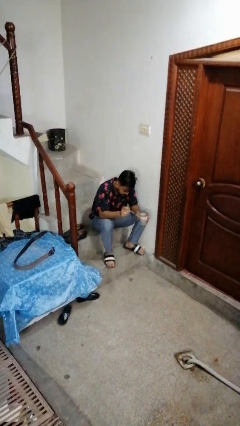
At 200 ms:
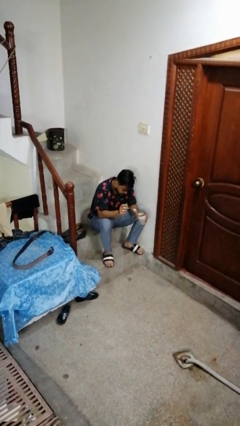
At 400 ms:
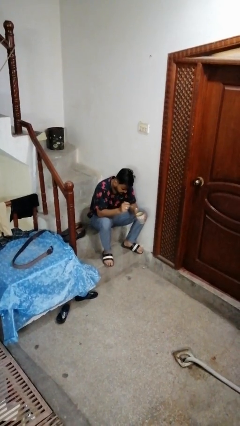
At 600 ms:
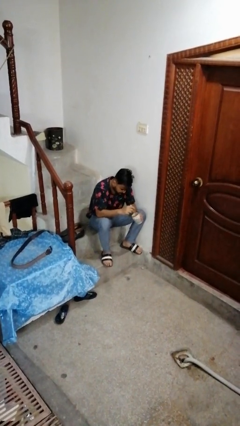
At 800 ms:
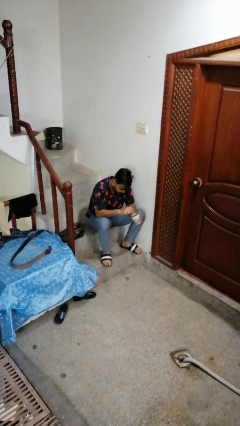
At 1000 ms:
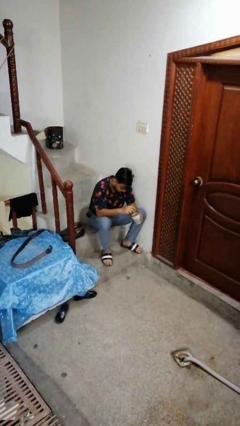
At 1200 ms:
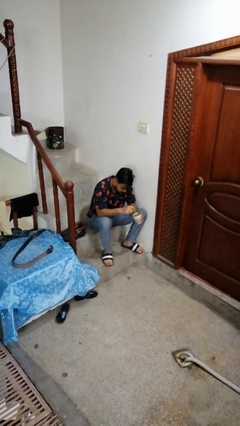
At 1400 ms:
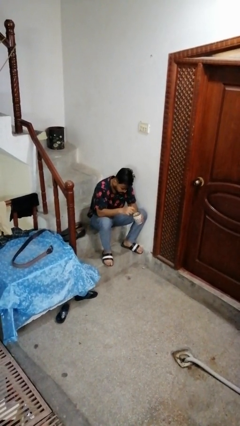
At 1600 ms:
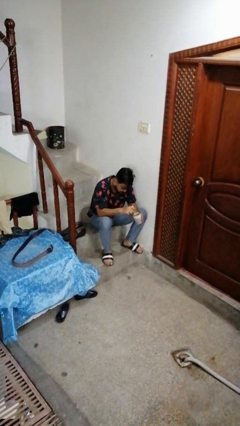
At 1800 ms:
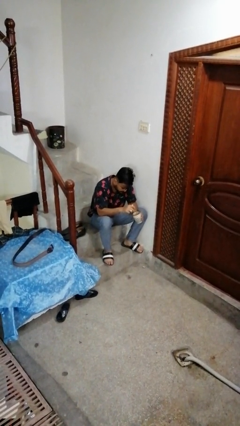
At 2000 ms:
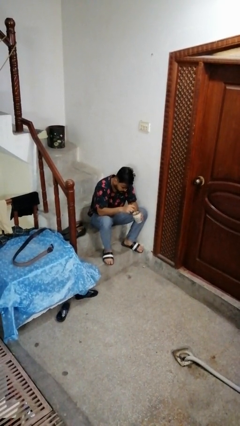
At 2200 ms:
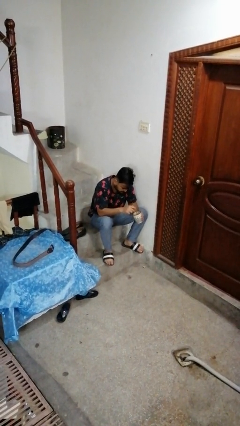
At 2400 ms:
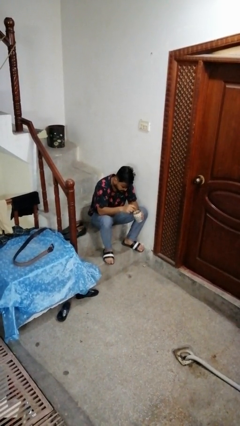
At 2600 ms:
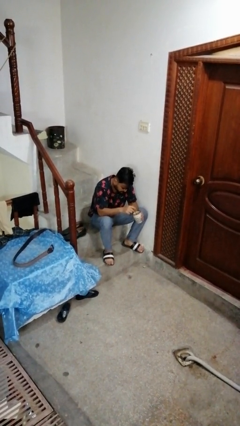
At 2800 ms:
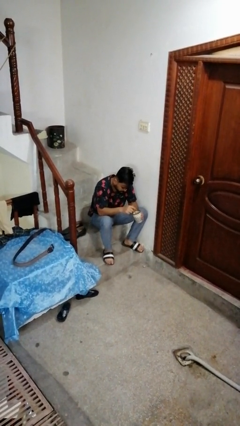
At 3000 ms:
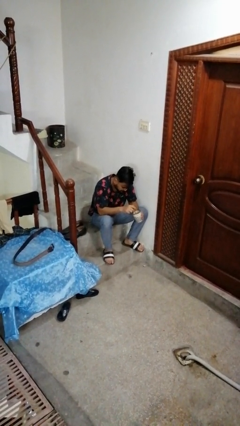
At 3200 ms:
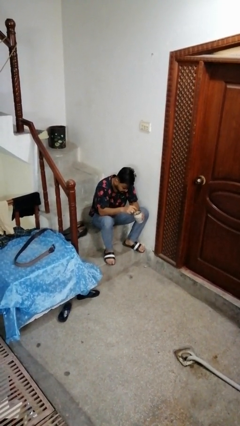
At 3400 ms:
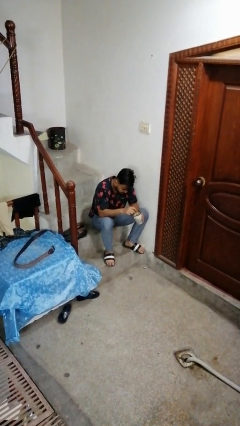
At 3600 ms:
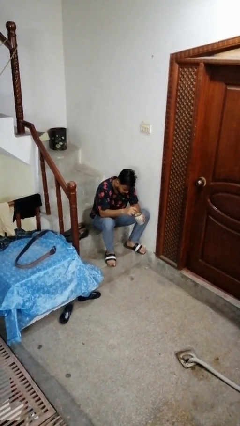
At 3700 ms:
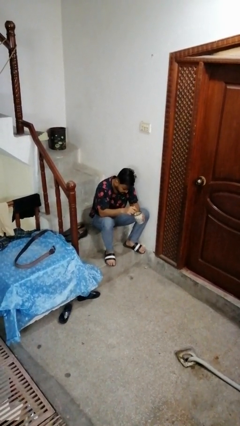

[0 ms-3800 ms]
person stirs mug

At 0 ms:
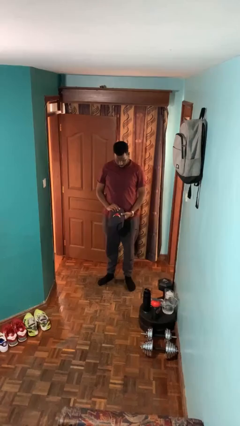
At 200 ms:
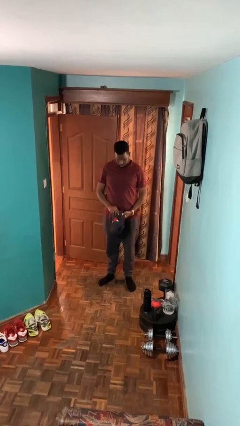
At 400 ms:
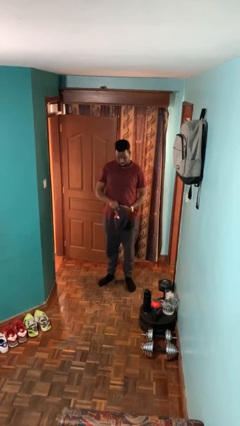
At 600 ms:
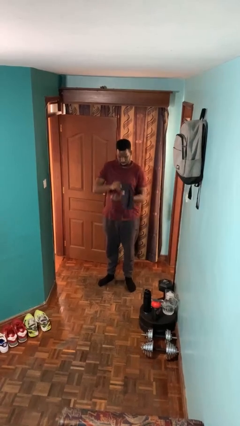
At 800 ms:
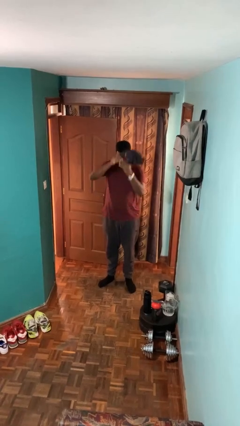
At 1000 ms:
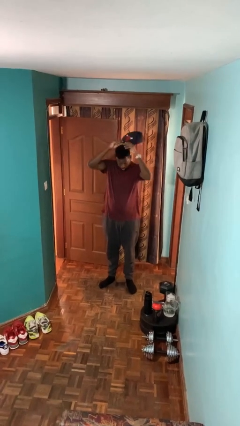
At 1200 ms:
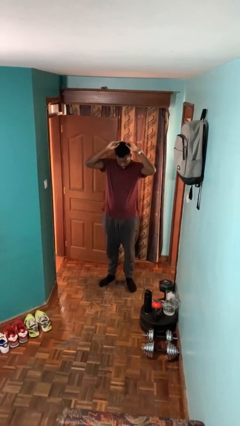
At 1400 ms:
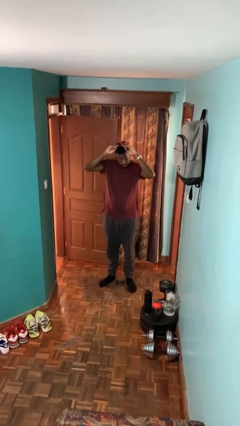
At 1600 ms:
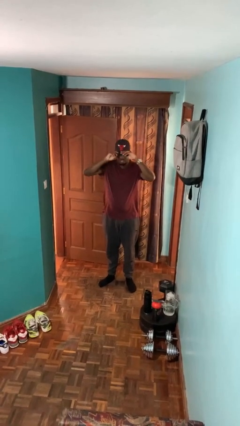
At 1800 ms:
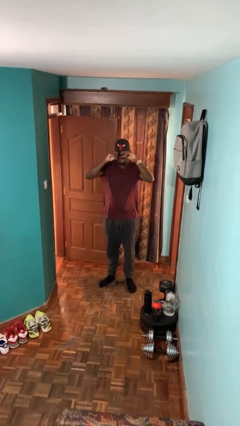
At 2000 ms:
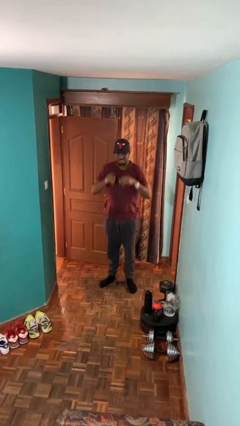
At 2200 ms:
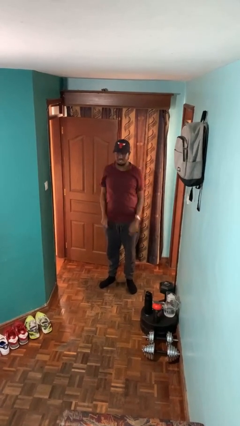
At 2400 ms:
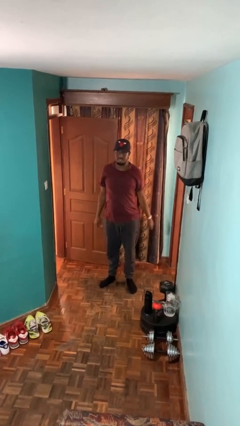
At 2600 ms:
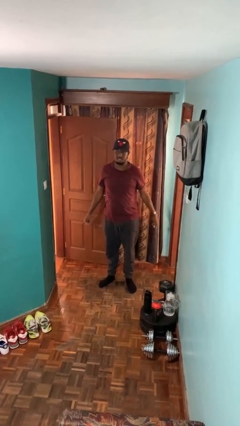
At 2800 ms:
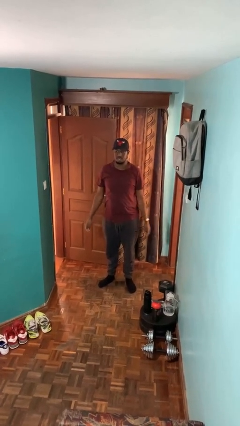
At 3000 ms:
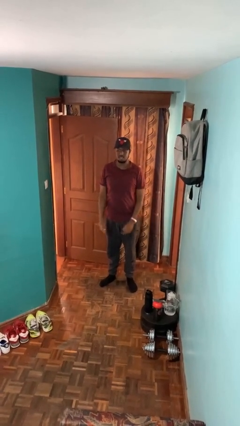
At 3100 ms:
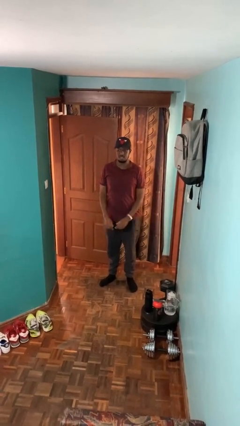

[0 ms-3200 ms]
person puts on hat

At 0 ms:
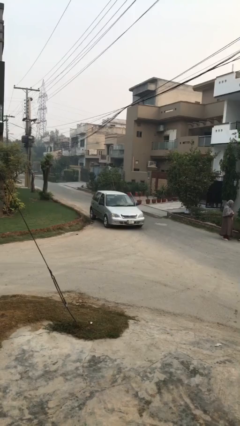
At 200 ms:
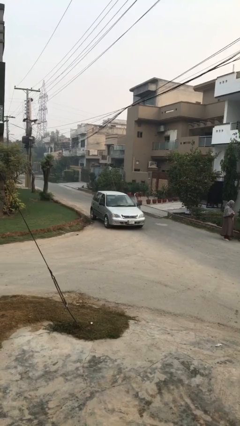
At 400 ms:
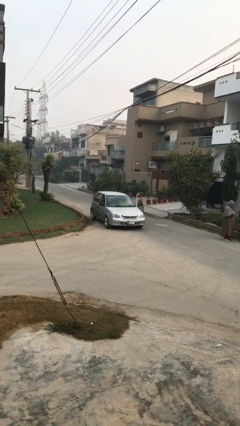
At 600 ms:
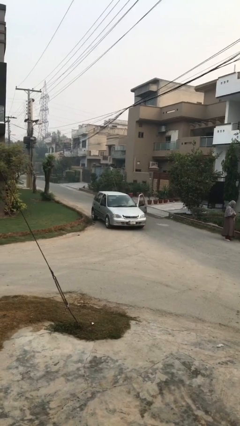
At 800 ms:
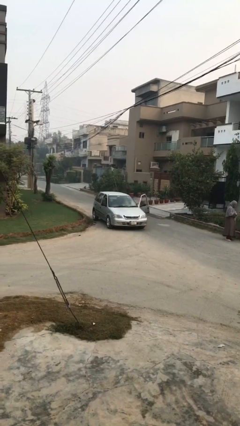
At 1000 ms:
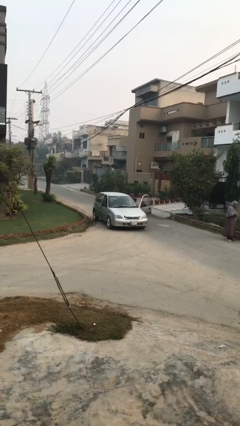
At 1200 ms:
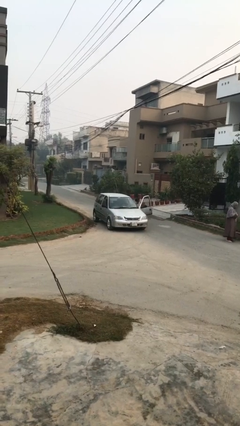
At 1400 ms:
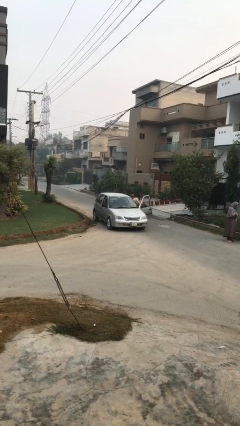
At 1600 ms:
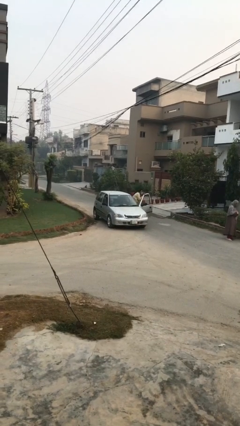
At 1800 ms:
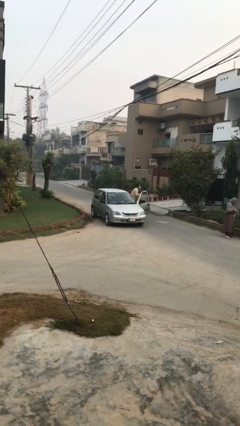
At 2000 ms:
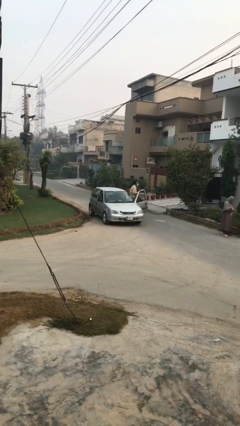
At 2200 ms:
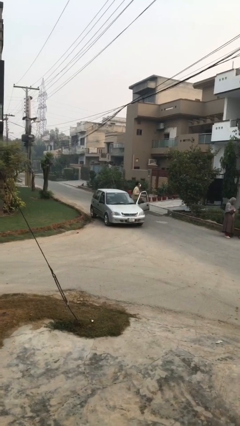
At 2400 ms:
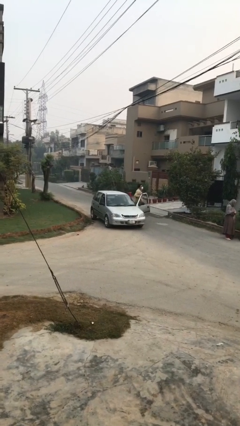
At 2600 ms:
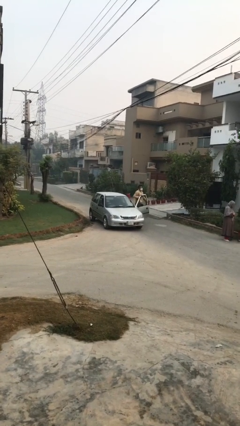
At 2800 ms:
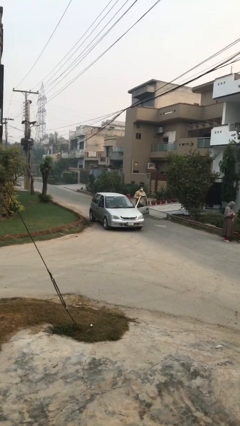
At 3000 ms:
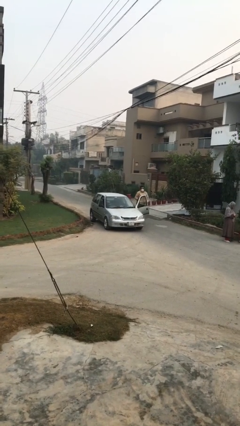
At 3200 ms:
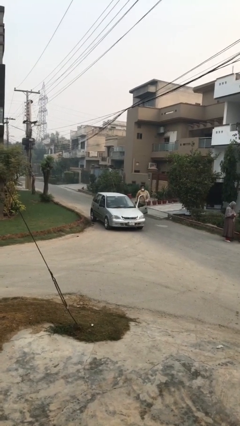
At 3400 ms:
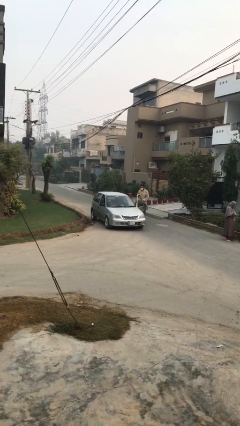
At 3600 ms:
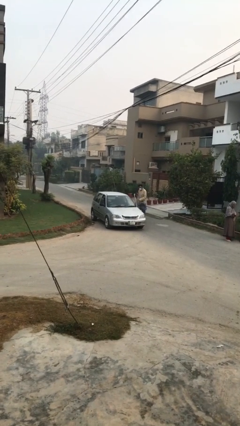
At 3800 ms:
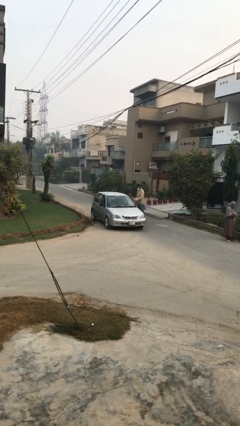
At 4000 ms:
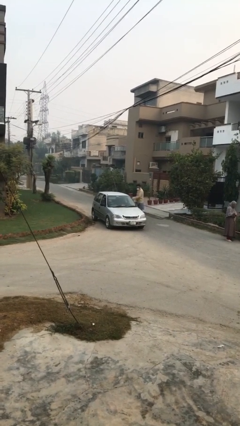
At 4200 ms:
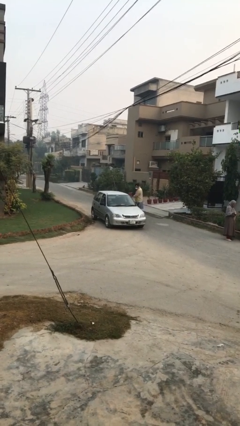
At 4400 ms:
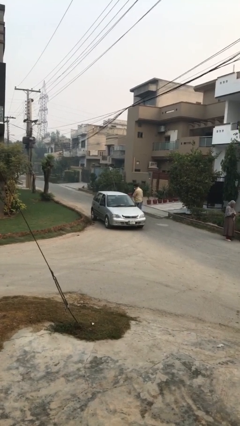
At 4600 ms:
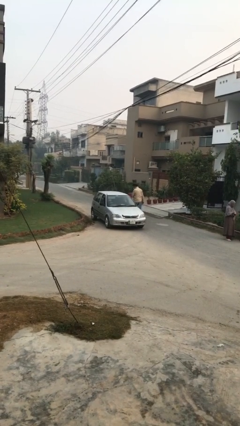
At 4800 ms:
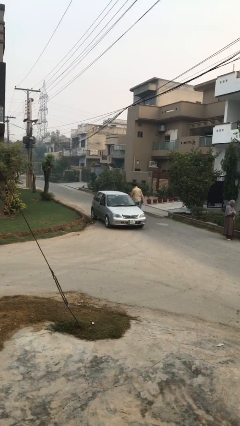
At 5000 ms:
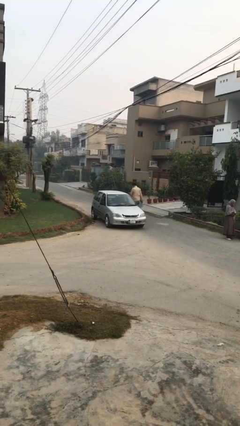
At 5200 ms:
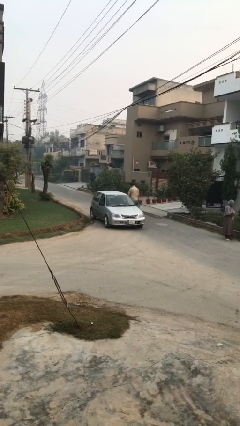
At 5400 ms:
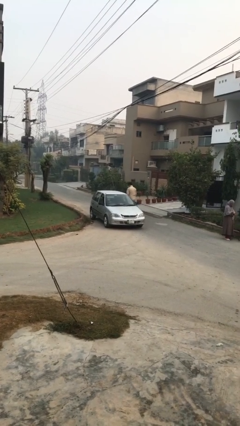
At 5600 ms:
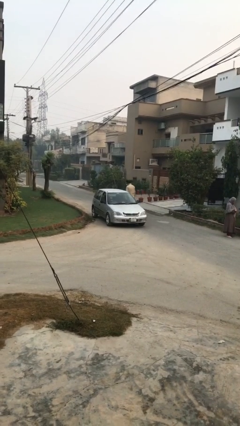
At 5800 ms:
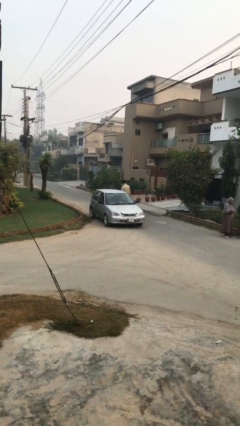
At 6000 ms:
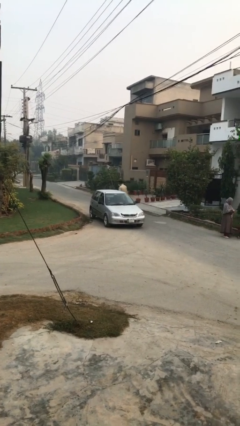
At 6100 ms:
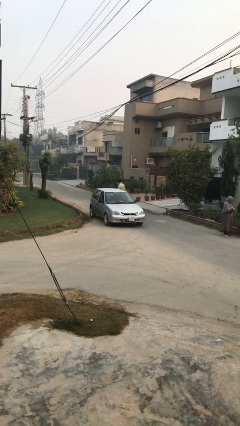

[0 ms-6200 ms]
car drops off person

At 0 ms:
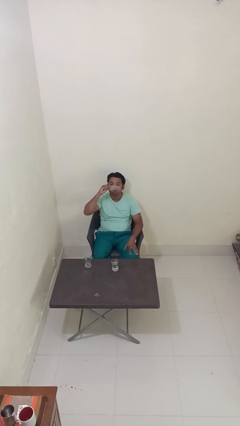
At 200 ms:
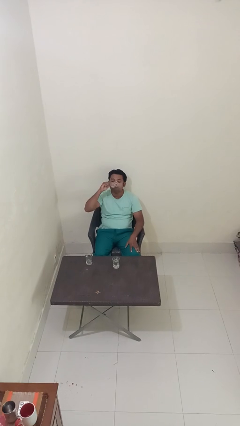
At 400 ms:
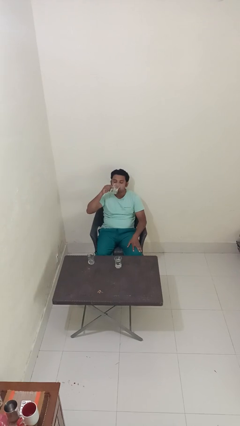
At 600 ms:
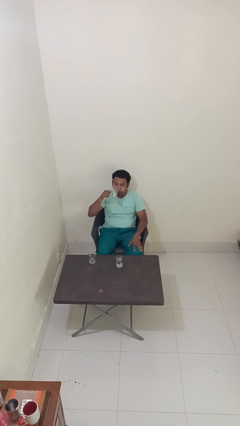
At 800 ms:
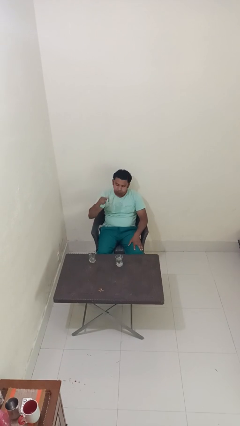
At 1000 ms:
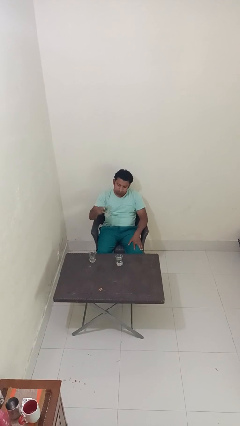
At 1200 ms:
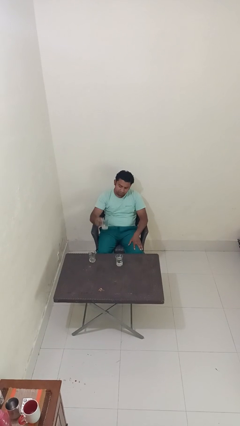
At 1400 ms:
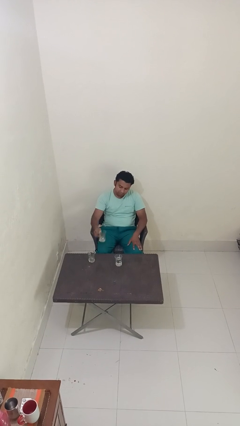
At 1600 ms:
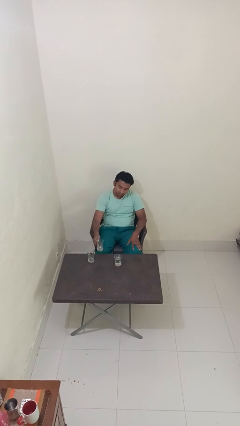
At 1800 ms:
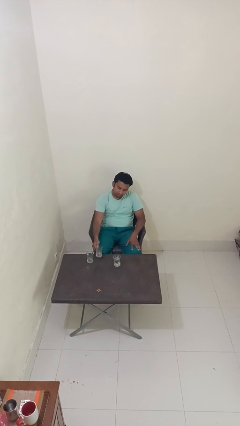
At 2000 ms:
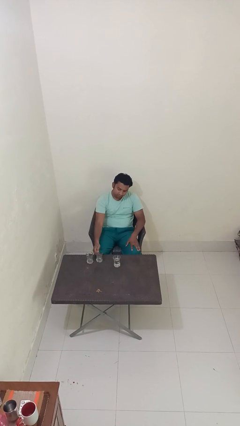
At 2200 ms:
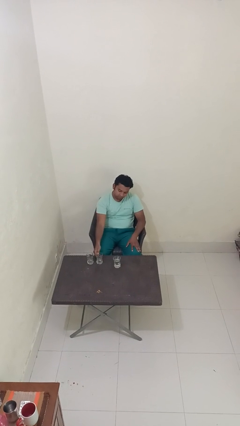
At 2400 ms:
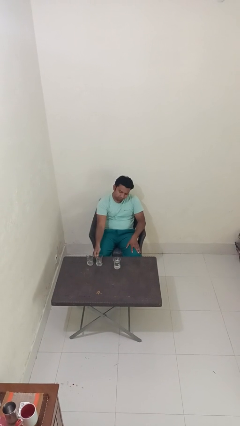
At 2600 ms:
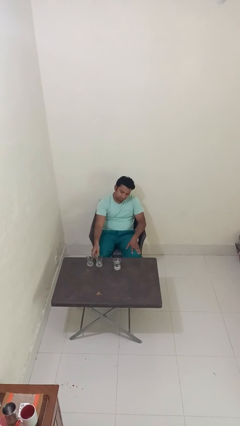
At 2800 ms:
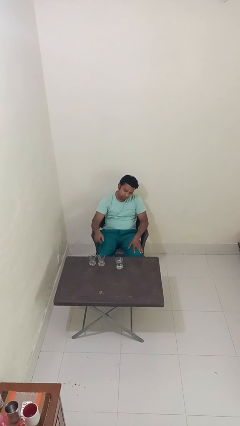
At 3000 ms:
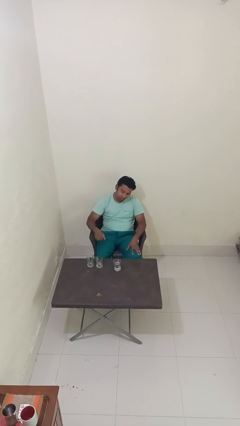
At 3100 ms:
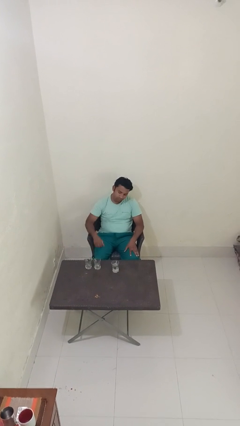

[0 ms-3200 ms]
person puts down object on table

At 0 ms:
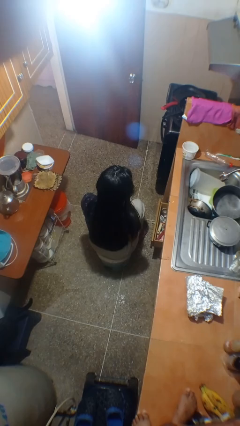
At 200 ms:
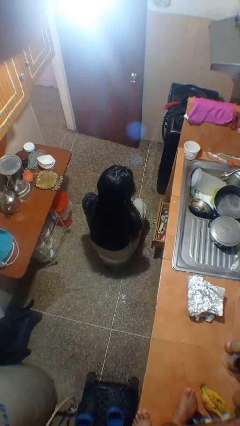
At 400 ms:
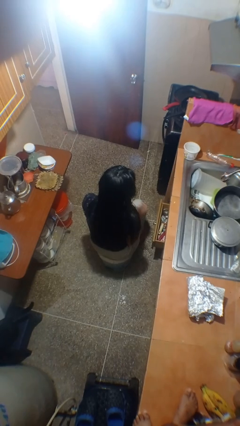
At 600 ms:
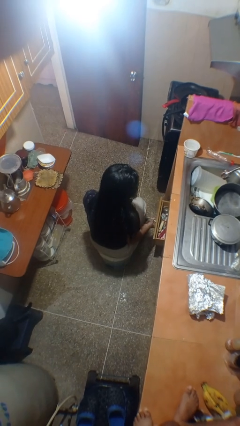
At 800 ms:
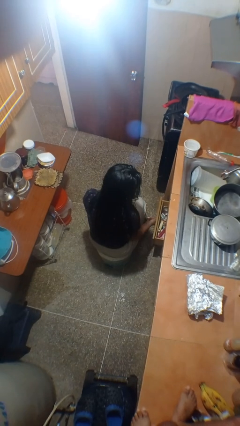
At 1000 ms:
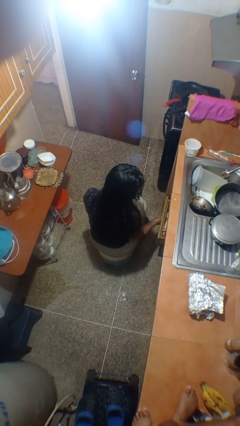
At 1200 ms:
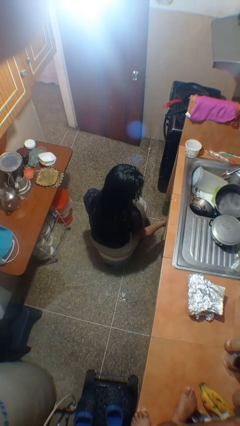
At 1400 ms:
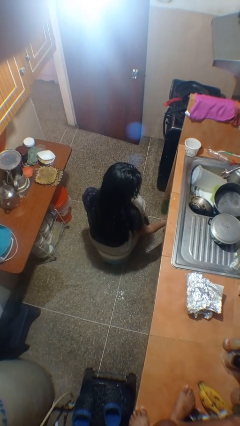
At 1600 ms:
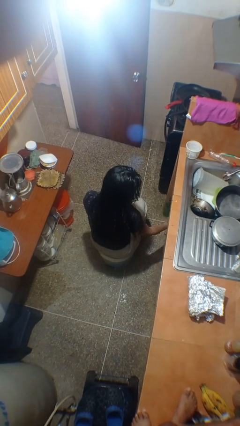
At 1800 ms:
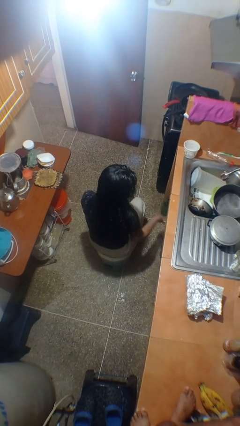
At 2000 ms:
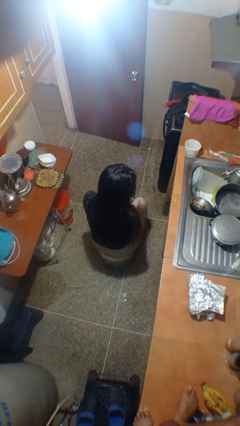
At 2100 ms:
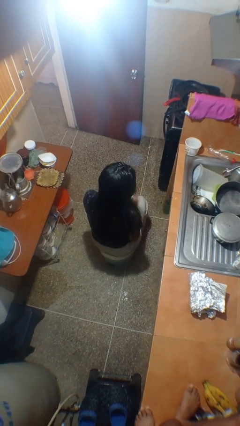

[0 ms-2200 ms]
person closes kitchen drawer